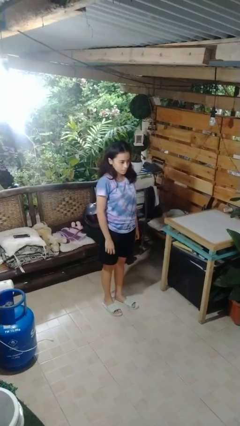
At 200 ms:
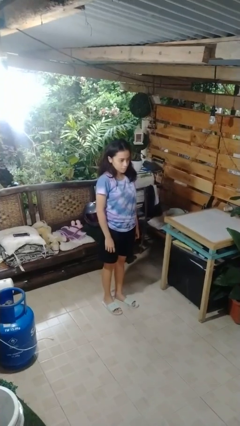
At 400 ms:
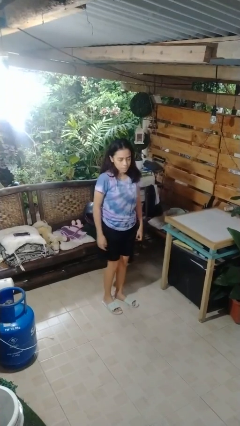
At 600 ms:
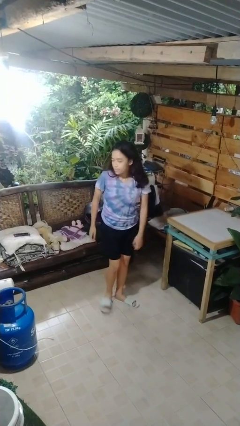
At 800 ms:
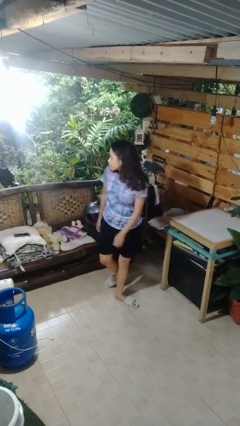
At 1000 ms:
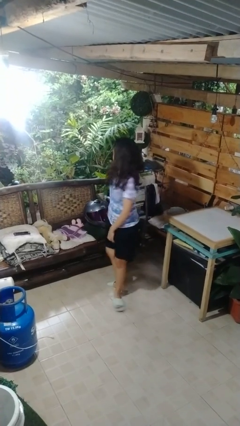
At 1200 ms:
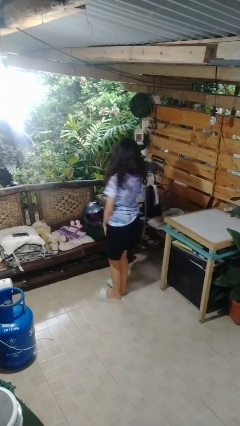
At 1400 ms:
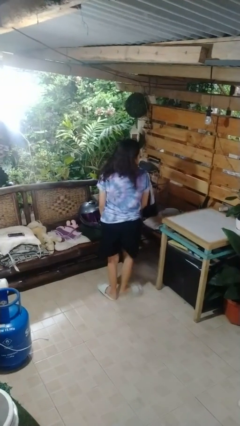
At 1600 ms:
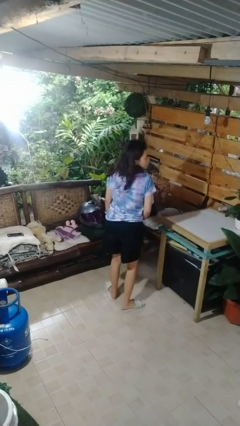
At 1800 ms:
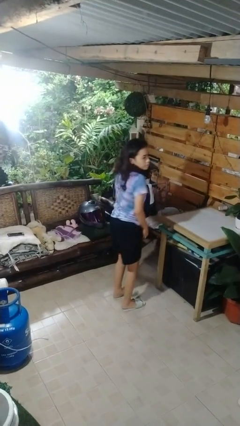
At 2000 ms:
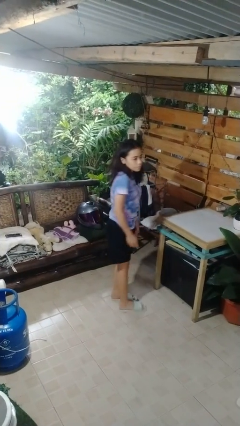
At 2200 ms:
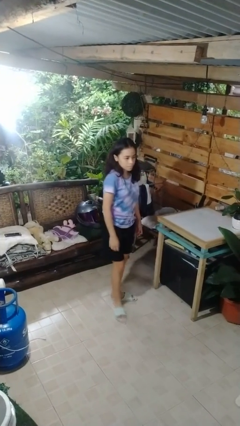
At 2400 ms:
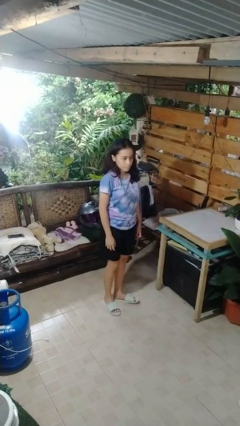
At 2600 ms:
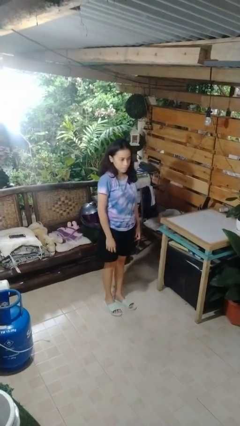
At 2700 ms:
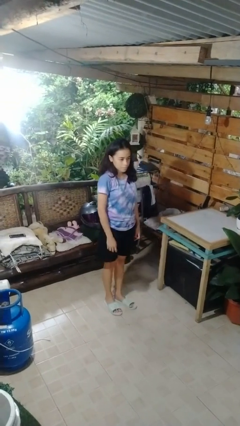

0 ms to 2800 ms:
person twirls

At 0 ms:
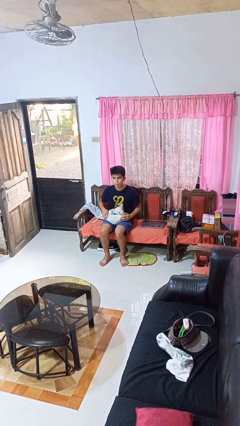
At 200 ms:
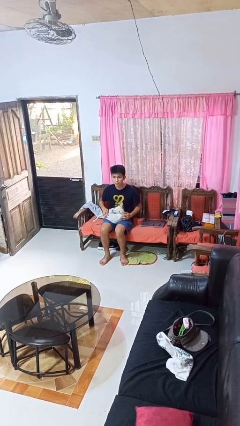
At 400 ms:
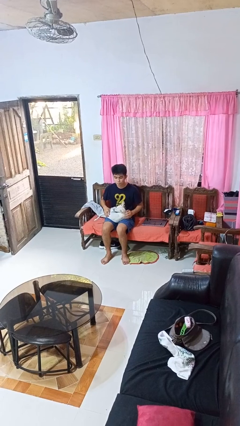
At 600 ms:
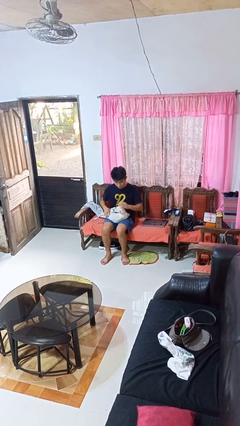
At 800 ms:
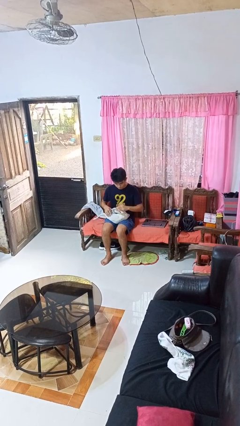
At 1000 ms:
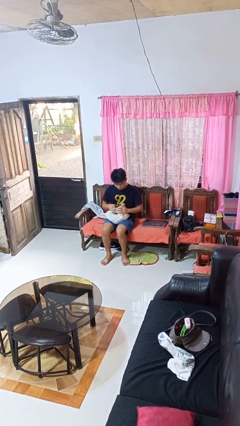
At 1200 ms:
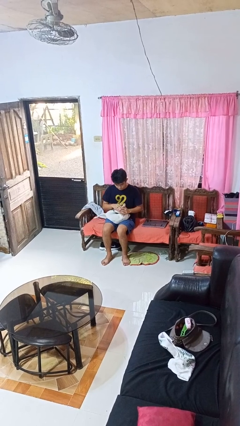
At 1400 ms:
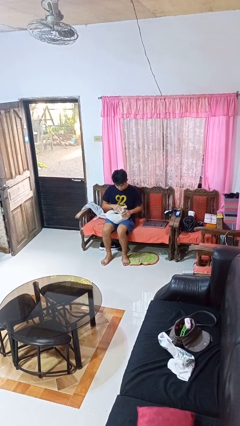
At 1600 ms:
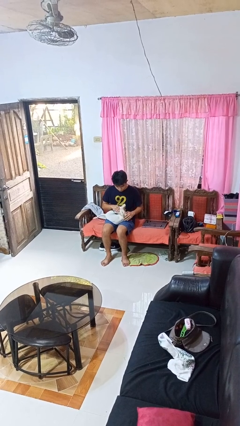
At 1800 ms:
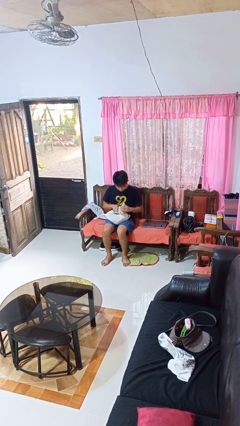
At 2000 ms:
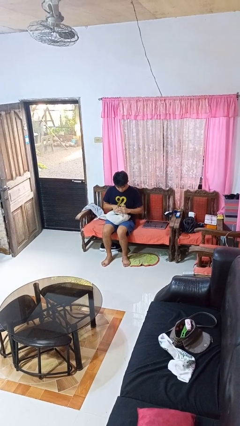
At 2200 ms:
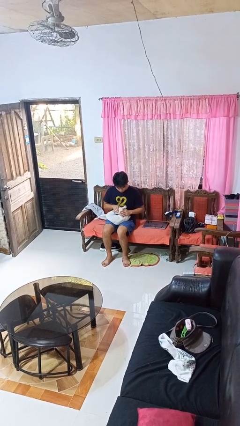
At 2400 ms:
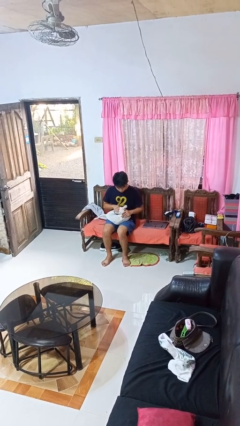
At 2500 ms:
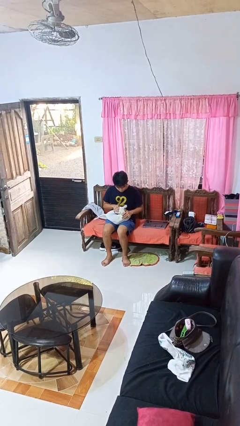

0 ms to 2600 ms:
person pets dog

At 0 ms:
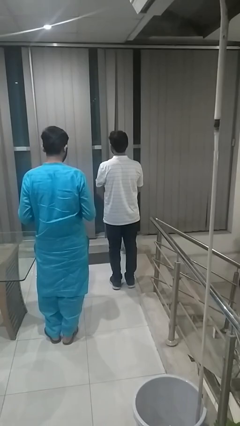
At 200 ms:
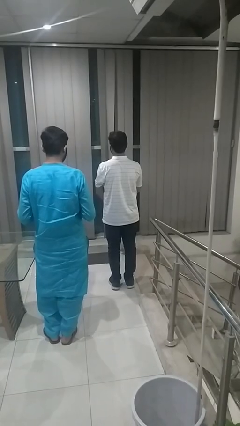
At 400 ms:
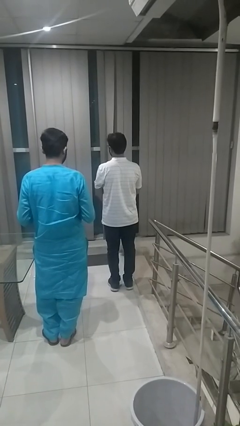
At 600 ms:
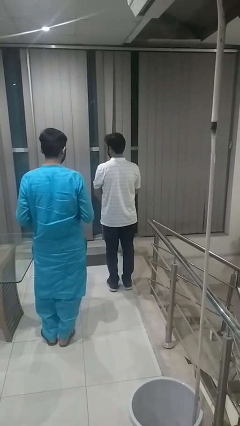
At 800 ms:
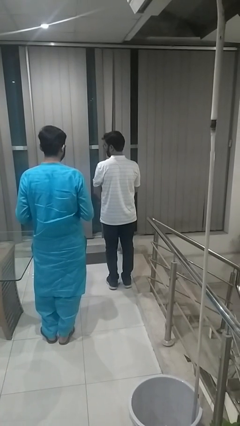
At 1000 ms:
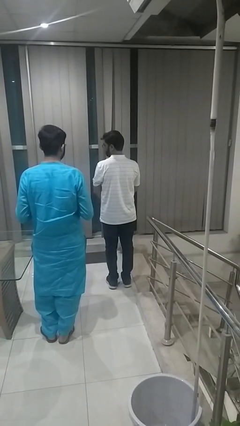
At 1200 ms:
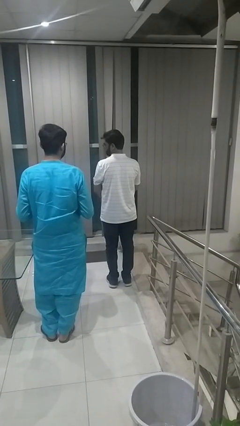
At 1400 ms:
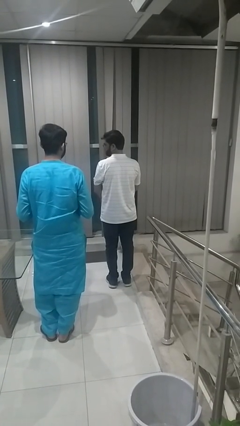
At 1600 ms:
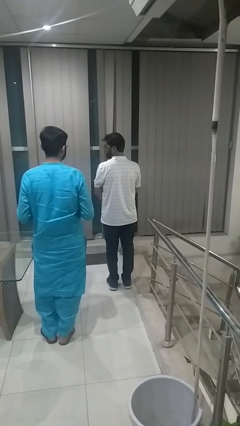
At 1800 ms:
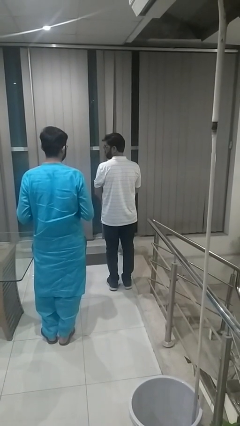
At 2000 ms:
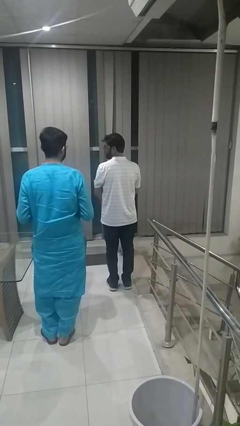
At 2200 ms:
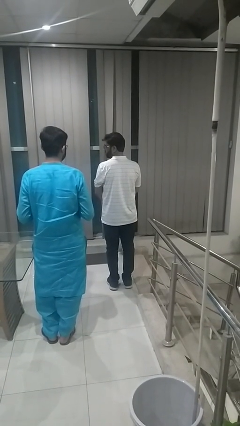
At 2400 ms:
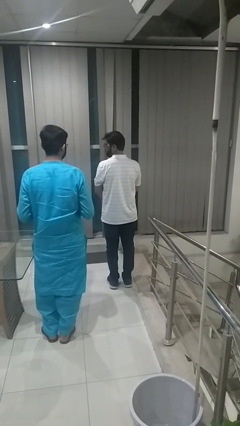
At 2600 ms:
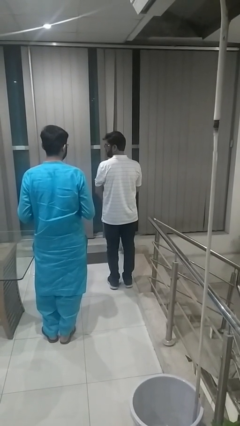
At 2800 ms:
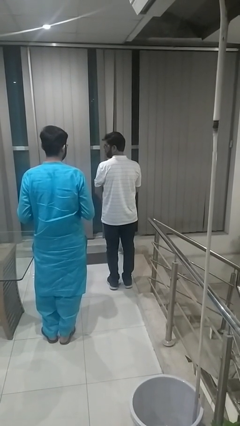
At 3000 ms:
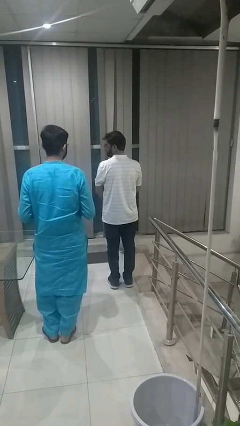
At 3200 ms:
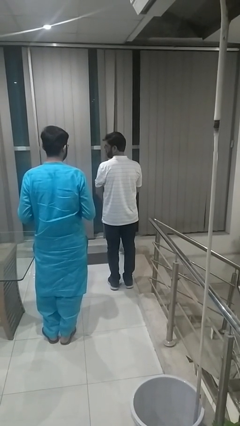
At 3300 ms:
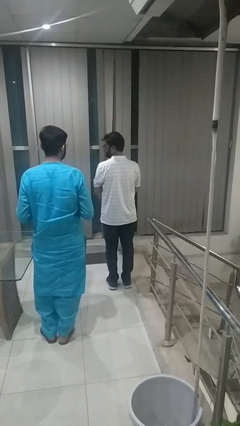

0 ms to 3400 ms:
person looks over shoulder

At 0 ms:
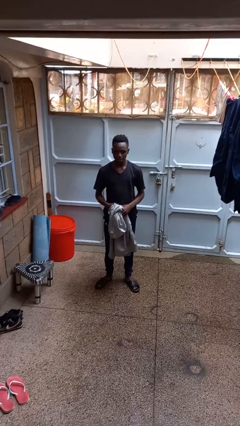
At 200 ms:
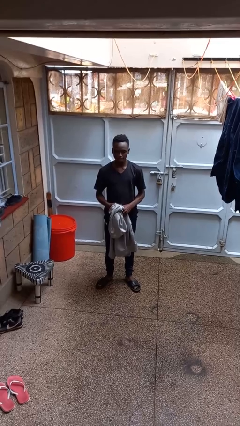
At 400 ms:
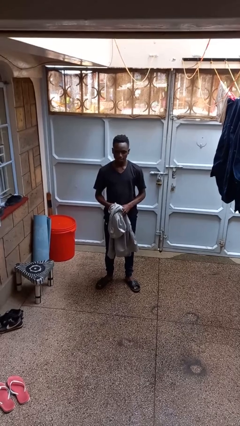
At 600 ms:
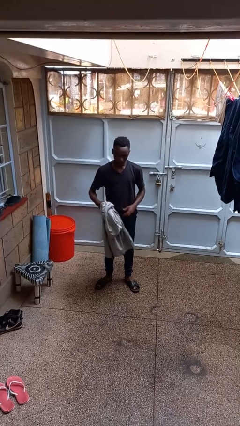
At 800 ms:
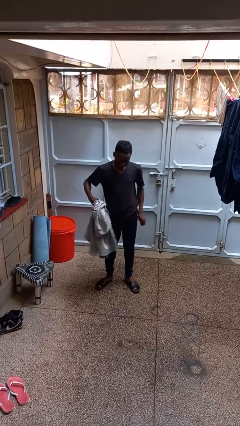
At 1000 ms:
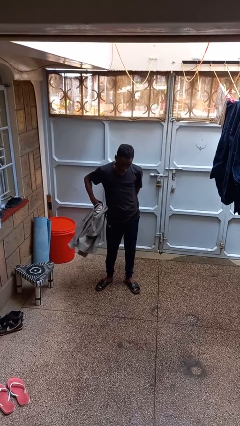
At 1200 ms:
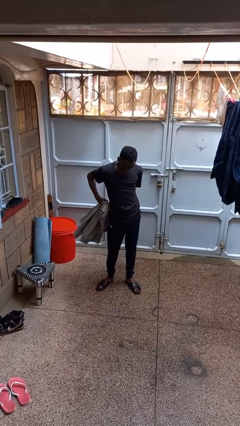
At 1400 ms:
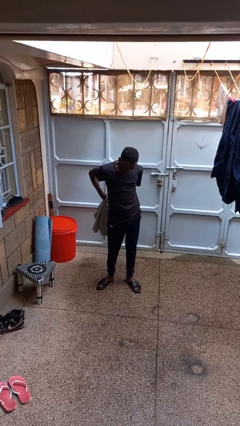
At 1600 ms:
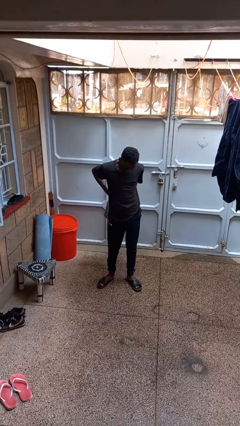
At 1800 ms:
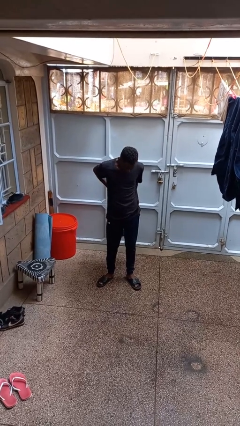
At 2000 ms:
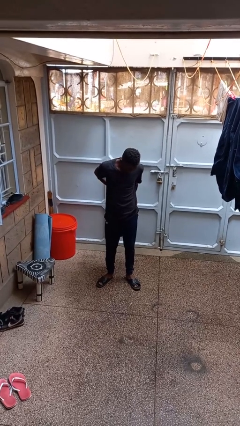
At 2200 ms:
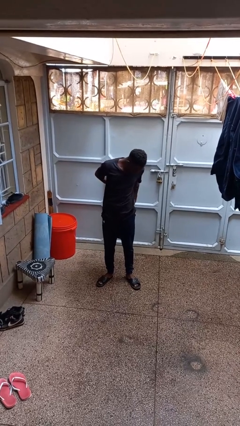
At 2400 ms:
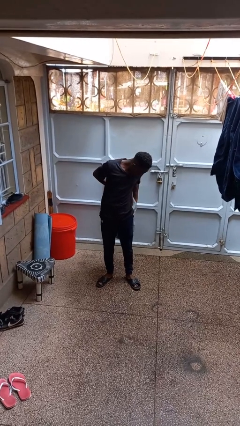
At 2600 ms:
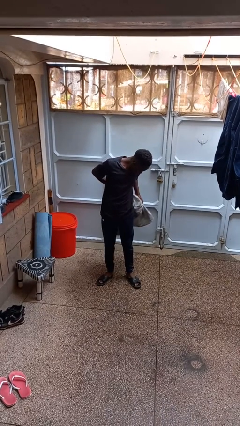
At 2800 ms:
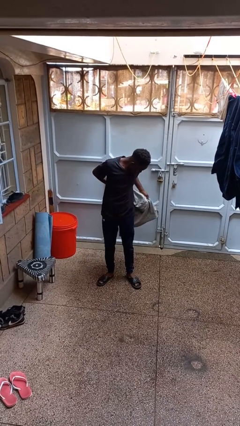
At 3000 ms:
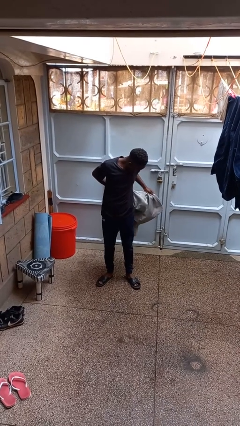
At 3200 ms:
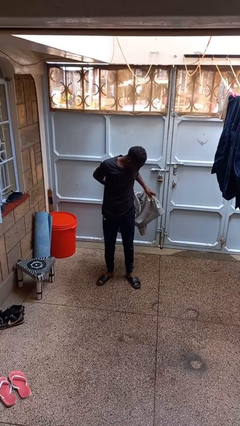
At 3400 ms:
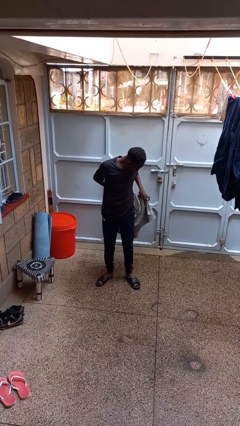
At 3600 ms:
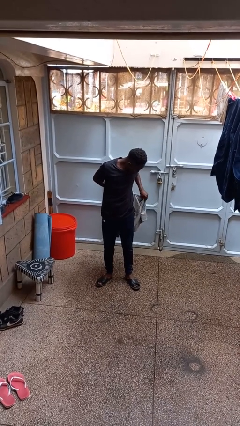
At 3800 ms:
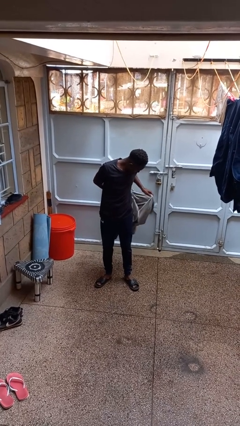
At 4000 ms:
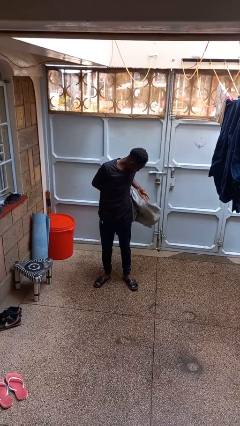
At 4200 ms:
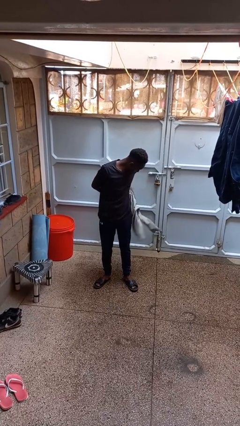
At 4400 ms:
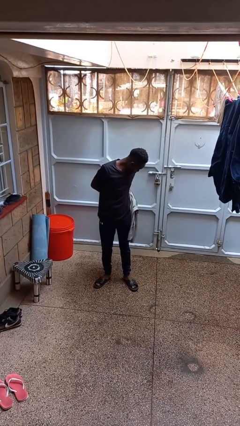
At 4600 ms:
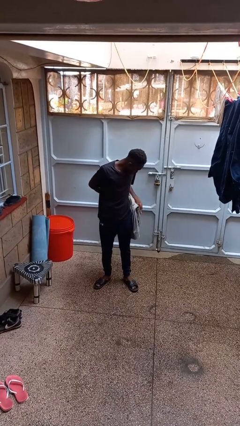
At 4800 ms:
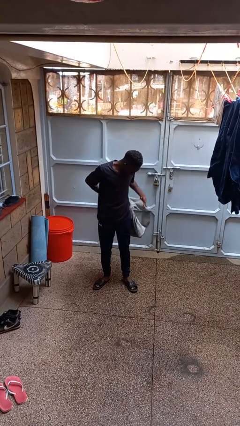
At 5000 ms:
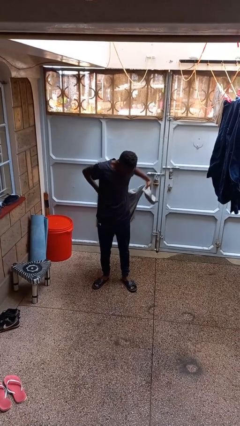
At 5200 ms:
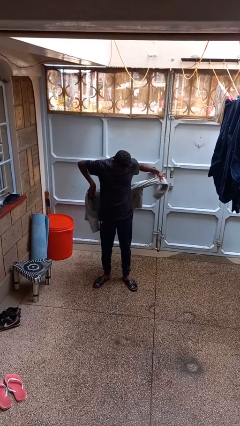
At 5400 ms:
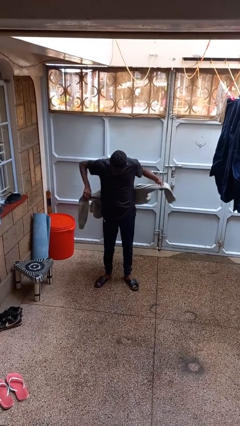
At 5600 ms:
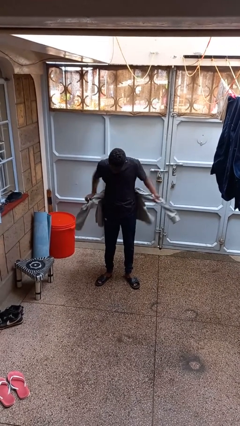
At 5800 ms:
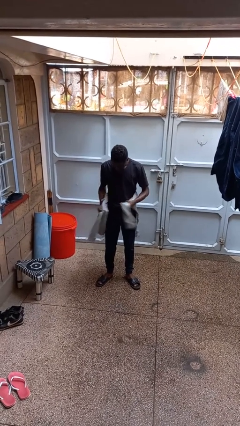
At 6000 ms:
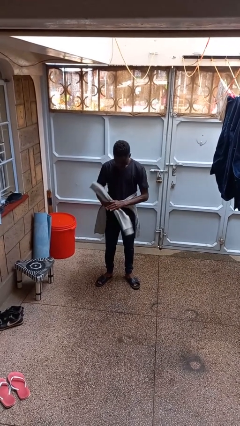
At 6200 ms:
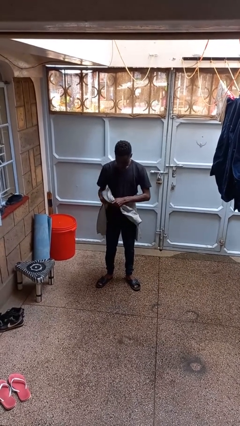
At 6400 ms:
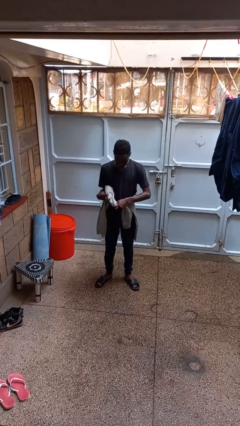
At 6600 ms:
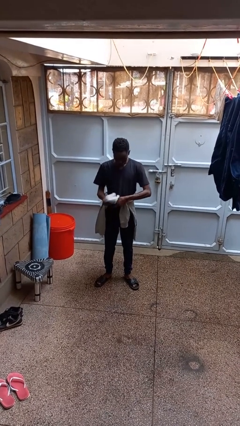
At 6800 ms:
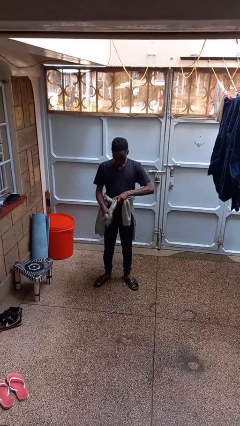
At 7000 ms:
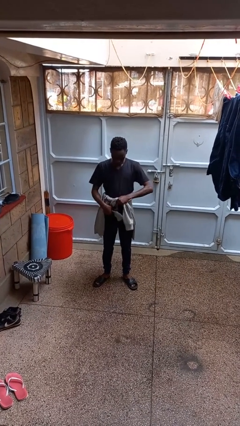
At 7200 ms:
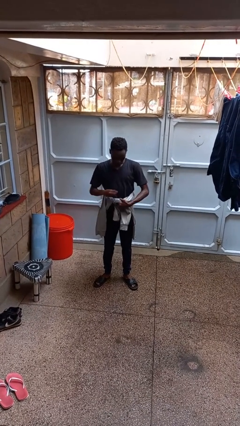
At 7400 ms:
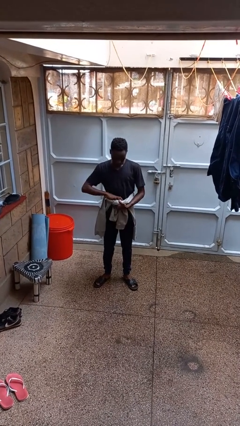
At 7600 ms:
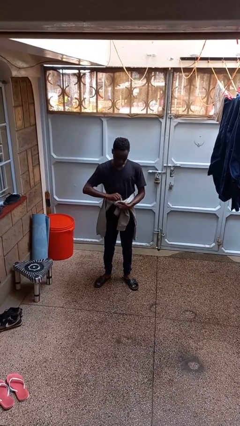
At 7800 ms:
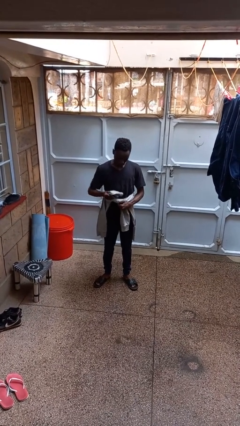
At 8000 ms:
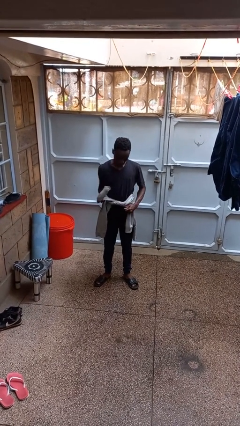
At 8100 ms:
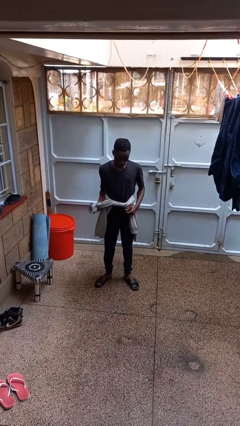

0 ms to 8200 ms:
person ties jacket around waist

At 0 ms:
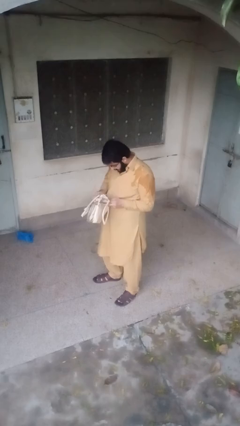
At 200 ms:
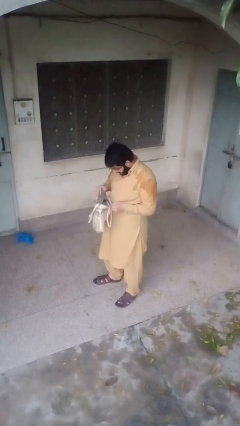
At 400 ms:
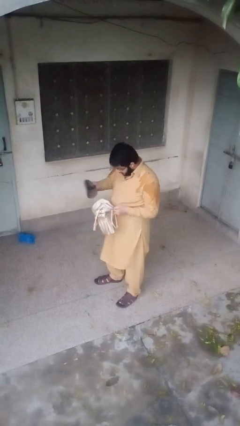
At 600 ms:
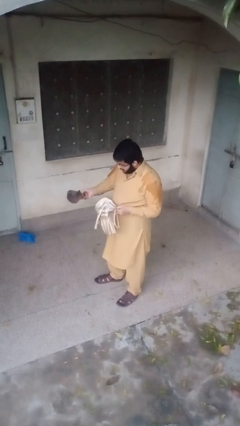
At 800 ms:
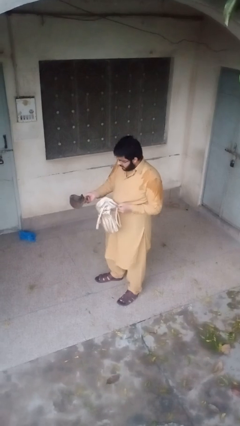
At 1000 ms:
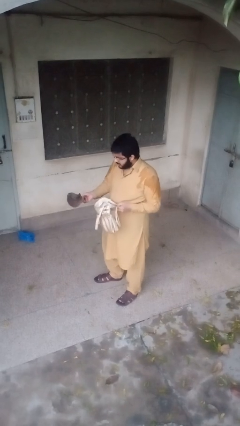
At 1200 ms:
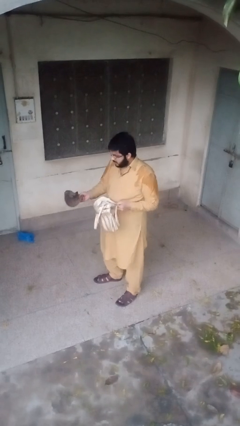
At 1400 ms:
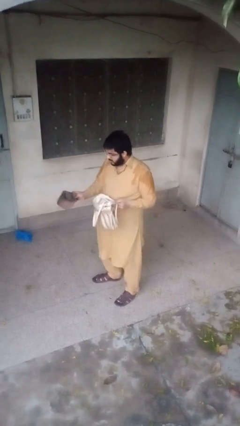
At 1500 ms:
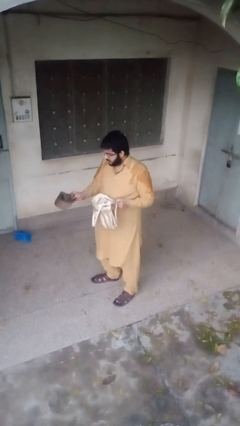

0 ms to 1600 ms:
person takes object from purse
